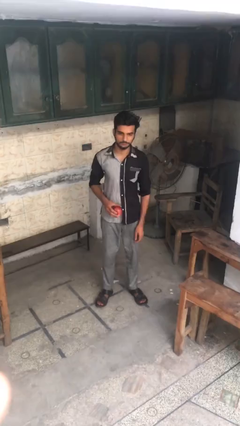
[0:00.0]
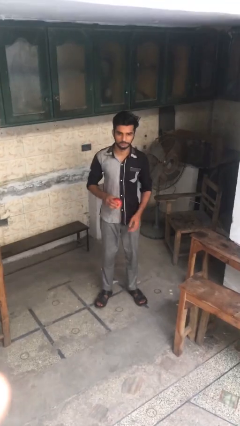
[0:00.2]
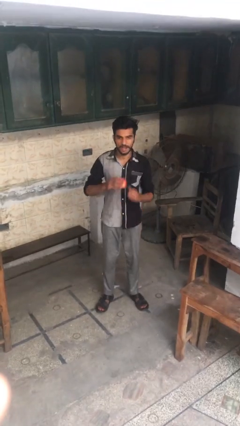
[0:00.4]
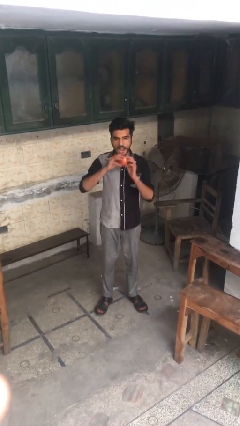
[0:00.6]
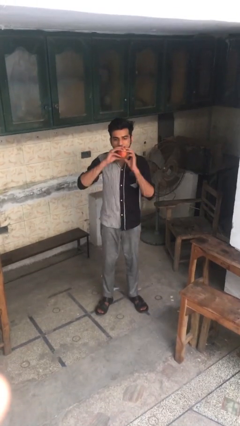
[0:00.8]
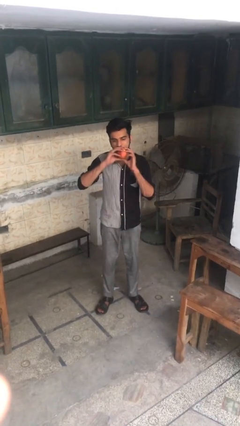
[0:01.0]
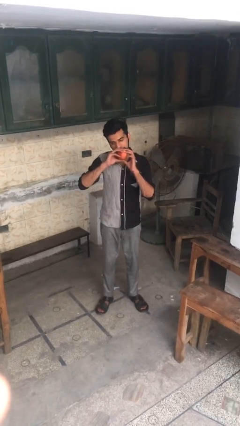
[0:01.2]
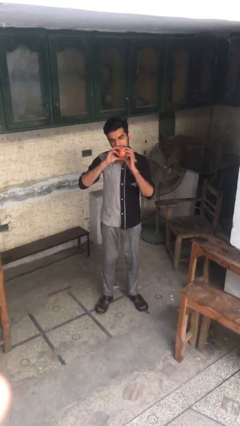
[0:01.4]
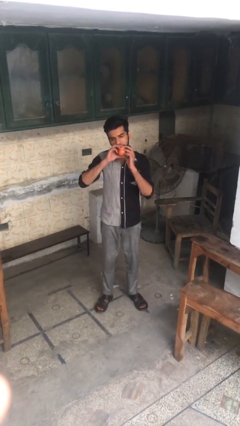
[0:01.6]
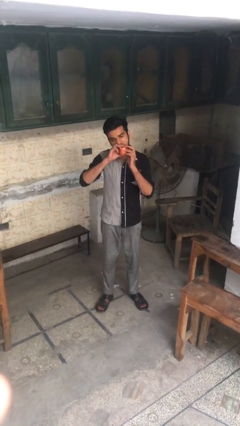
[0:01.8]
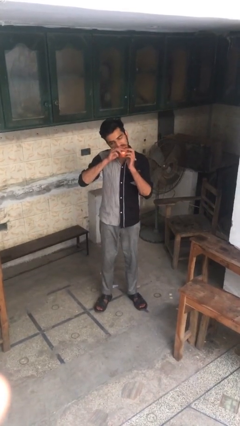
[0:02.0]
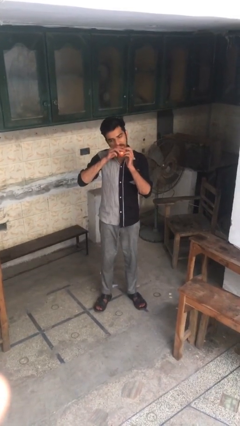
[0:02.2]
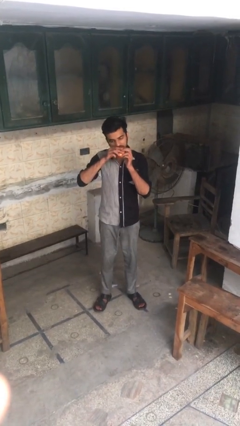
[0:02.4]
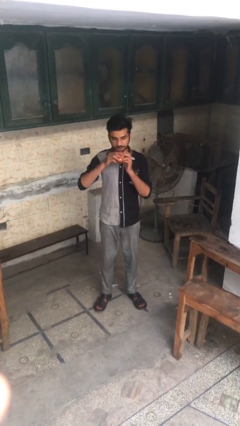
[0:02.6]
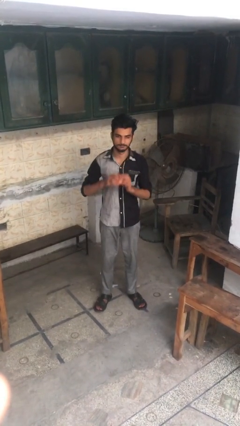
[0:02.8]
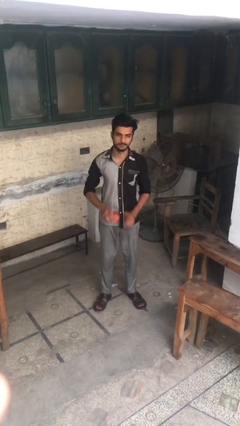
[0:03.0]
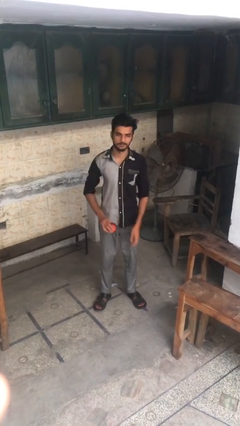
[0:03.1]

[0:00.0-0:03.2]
person eats apple

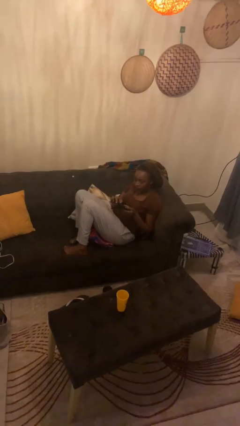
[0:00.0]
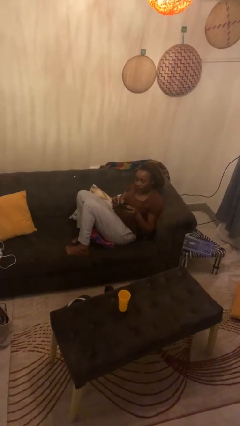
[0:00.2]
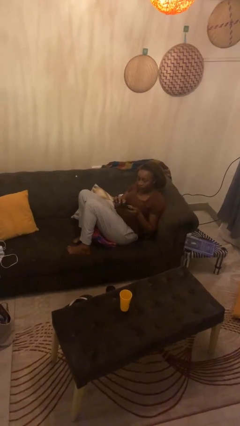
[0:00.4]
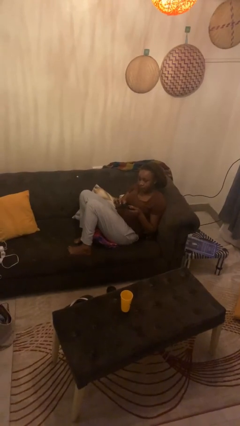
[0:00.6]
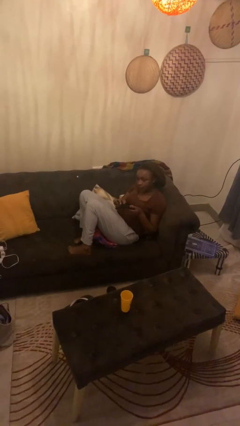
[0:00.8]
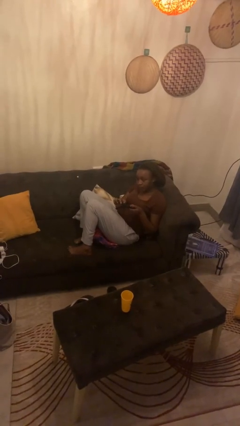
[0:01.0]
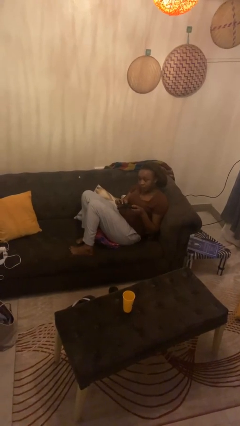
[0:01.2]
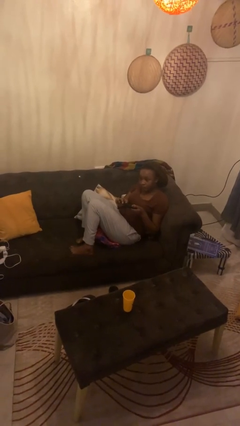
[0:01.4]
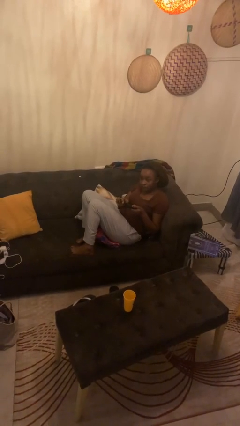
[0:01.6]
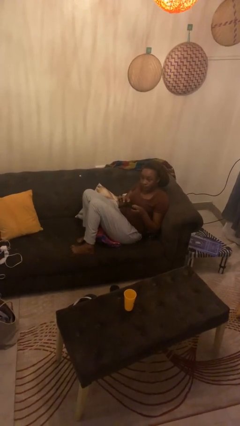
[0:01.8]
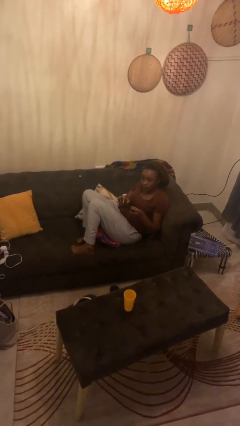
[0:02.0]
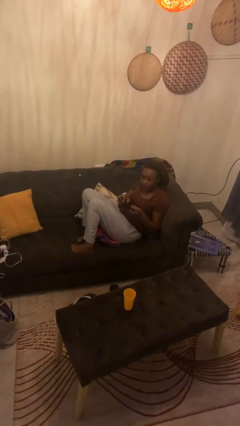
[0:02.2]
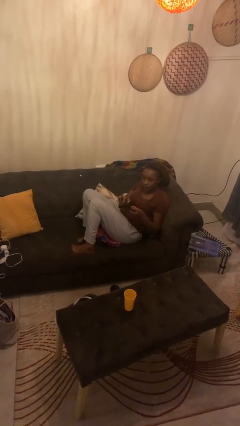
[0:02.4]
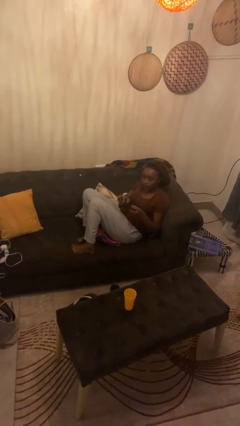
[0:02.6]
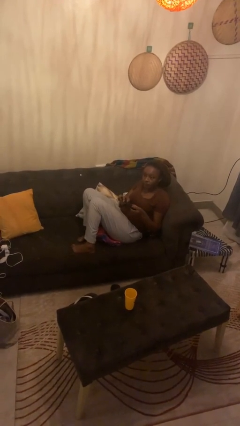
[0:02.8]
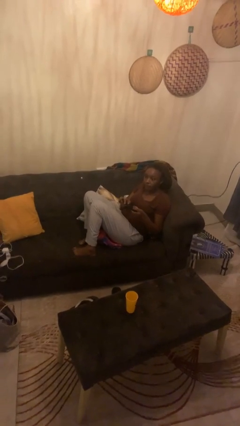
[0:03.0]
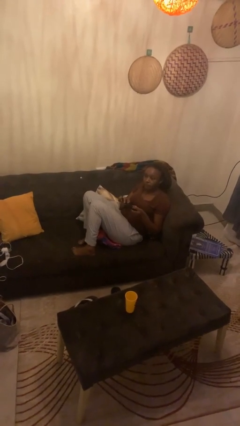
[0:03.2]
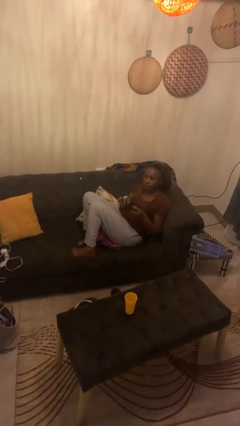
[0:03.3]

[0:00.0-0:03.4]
person interacts with handheld game

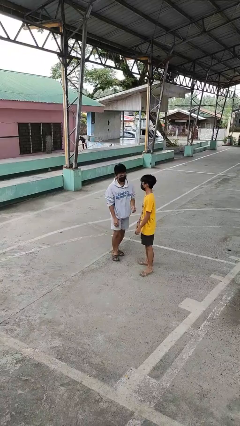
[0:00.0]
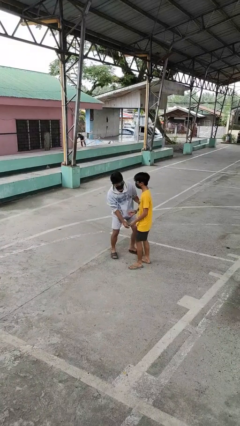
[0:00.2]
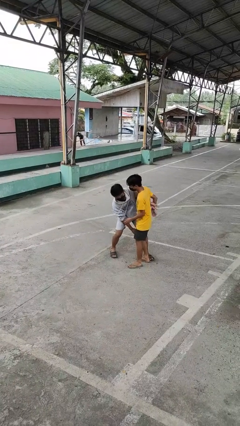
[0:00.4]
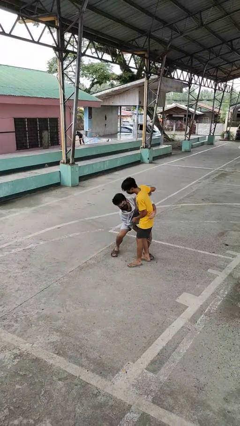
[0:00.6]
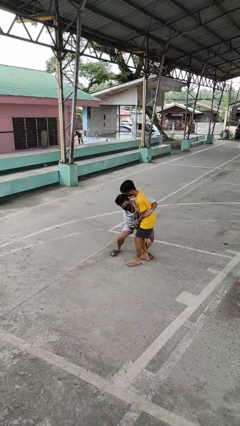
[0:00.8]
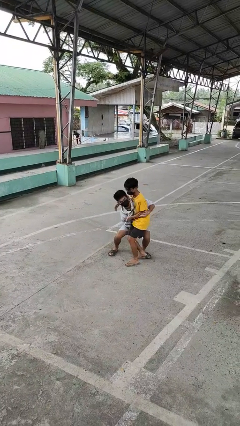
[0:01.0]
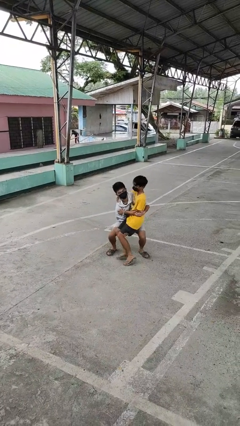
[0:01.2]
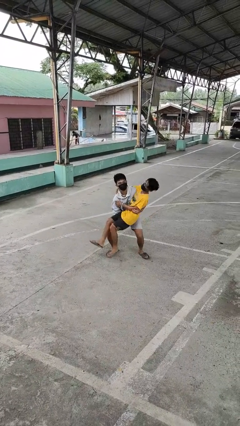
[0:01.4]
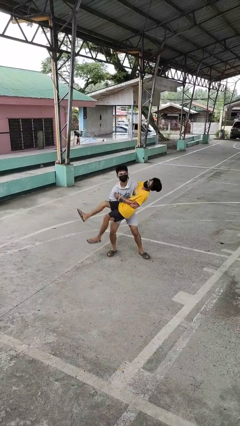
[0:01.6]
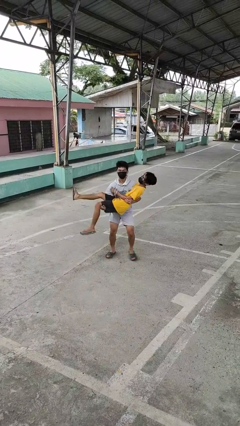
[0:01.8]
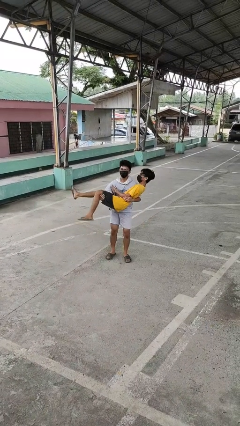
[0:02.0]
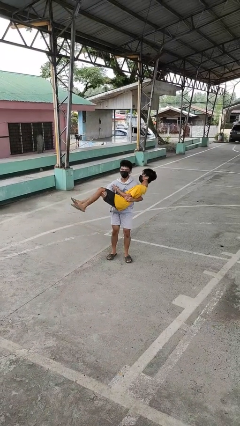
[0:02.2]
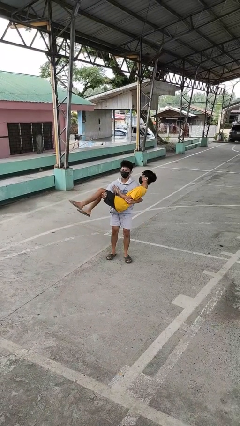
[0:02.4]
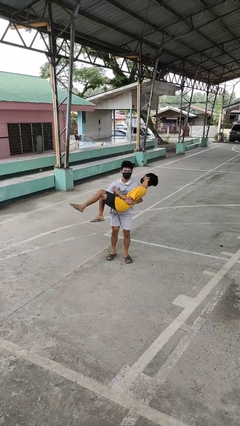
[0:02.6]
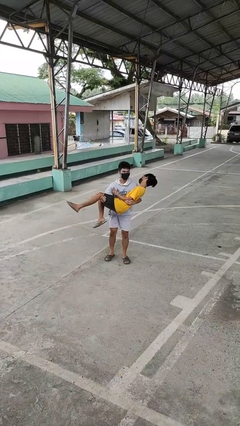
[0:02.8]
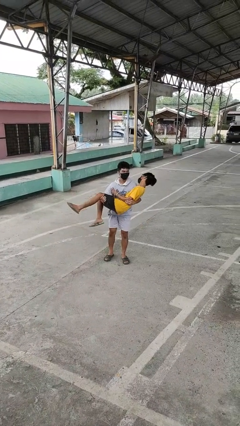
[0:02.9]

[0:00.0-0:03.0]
person picks up person

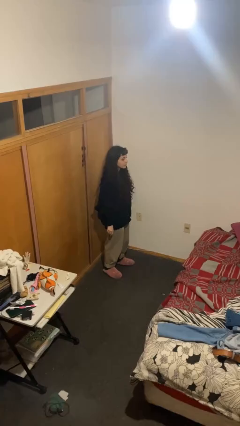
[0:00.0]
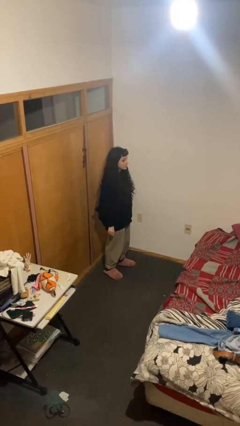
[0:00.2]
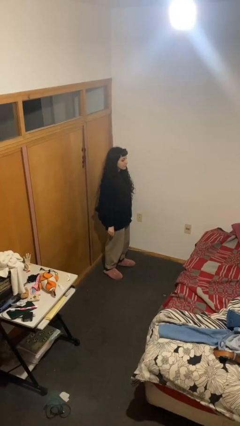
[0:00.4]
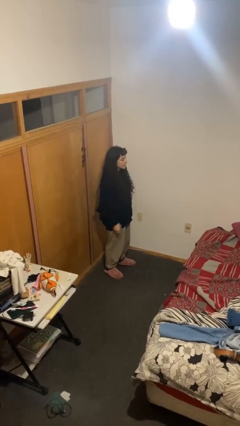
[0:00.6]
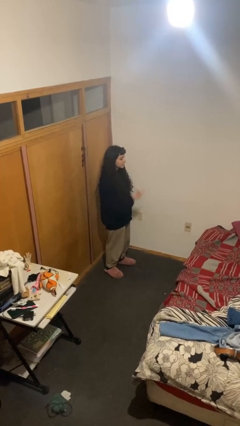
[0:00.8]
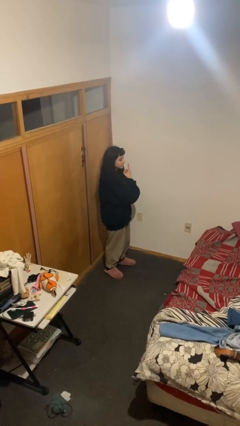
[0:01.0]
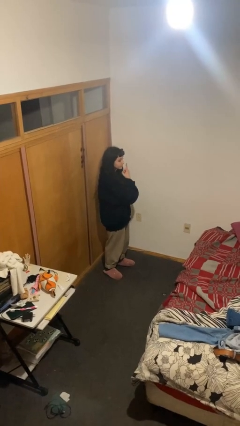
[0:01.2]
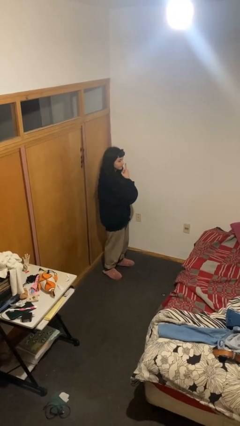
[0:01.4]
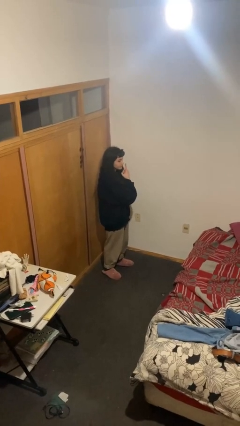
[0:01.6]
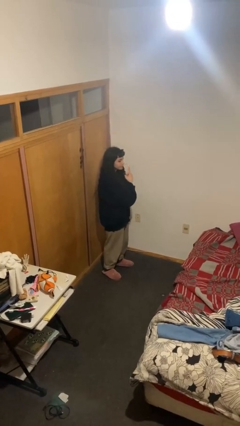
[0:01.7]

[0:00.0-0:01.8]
person gestures number one

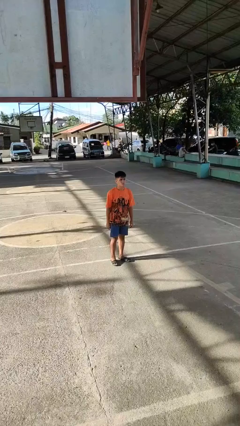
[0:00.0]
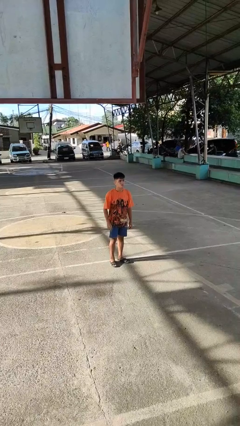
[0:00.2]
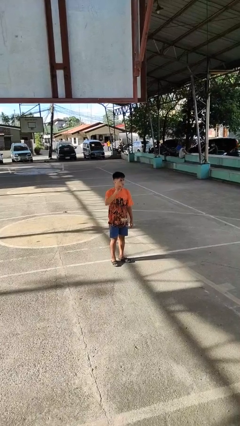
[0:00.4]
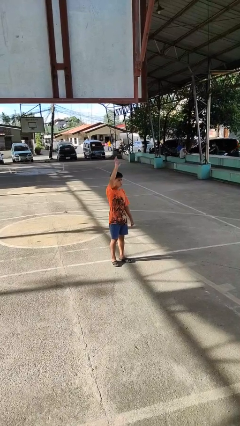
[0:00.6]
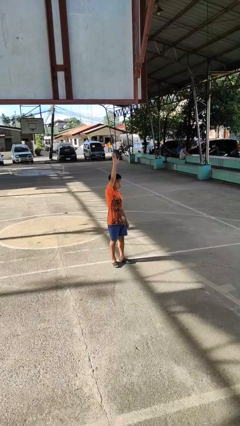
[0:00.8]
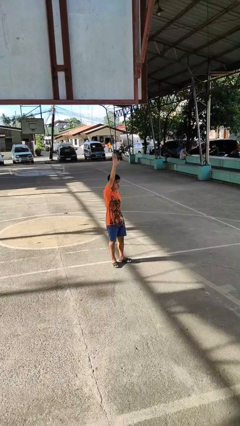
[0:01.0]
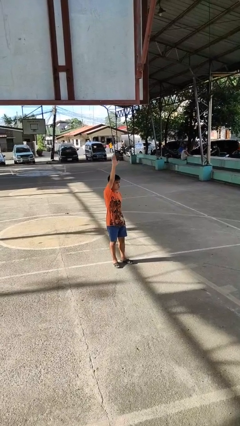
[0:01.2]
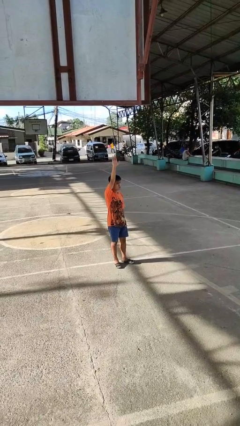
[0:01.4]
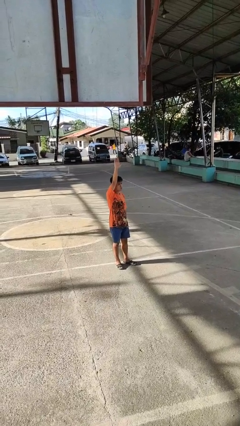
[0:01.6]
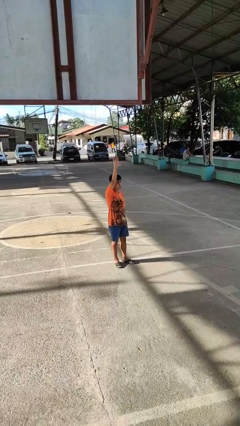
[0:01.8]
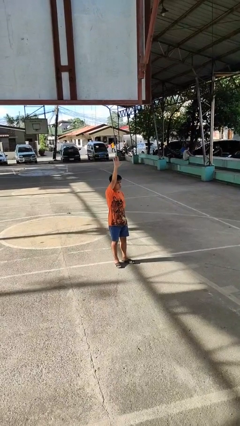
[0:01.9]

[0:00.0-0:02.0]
person gestures raise hand

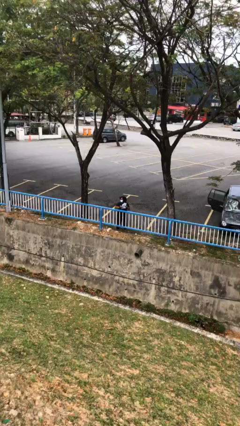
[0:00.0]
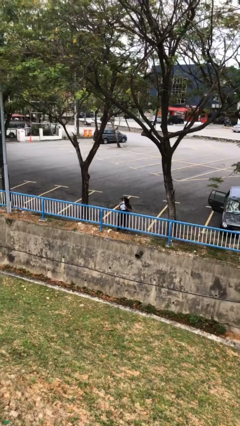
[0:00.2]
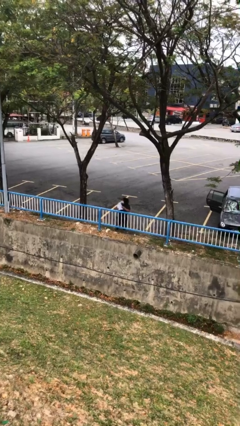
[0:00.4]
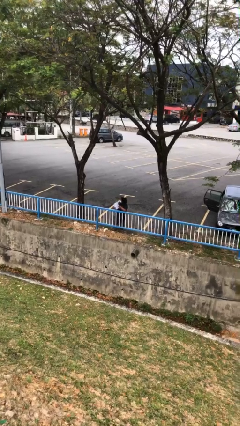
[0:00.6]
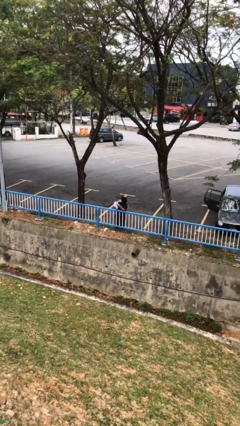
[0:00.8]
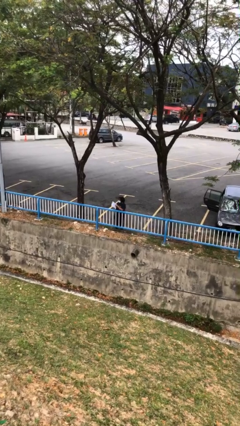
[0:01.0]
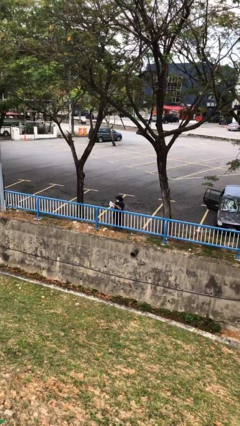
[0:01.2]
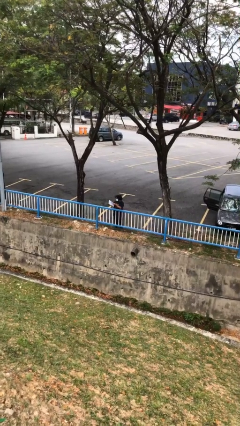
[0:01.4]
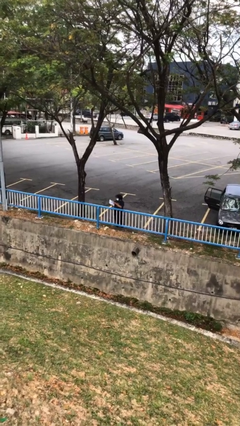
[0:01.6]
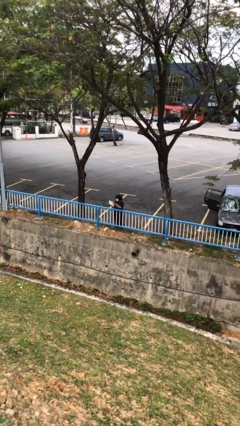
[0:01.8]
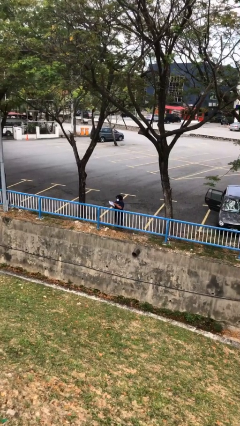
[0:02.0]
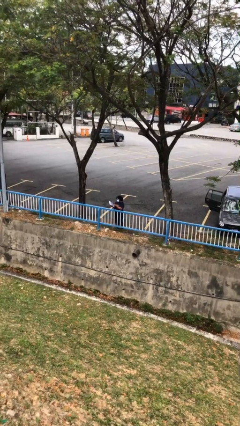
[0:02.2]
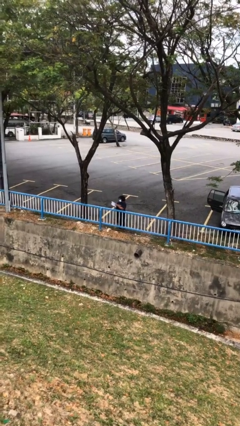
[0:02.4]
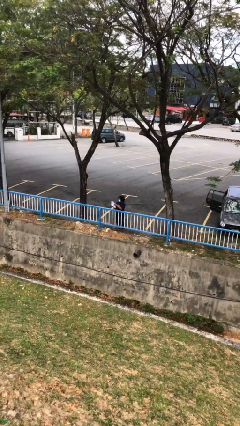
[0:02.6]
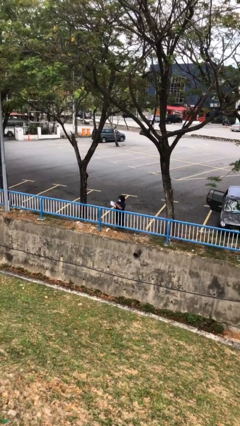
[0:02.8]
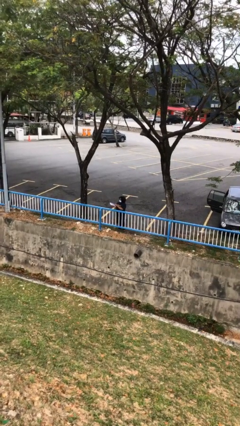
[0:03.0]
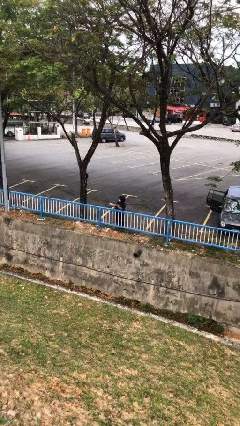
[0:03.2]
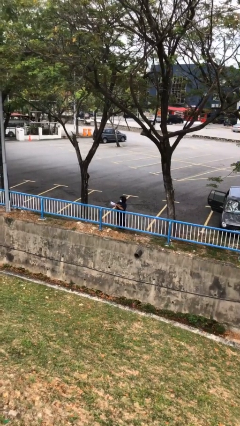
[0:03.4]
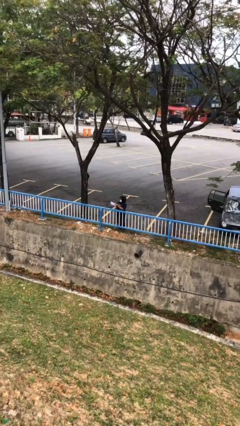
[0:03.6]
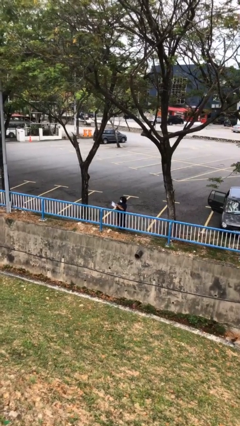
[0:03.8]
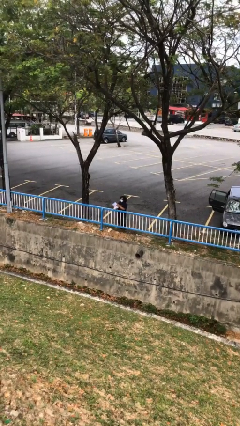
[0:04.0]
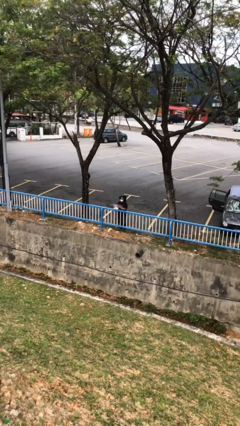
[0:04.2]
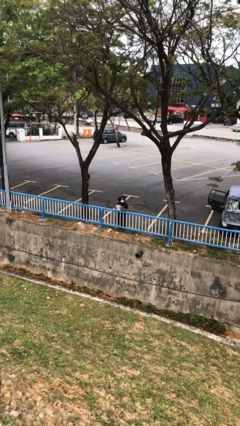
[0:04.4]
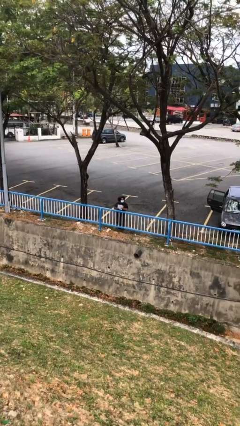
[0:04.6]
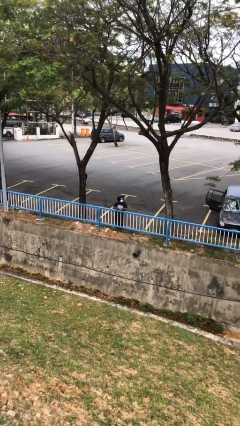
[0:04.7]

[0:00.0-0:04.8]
person reads document
